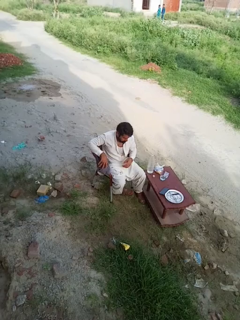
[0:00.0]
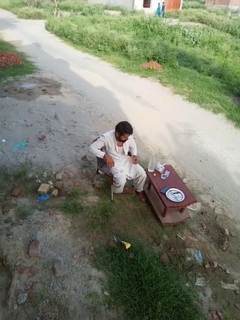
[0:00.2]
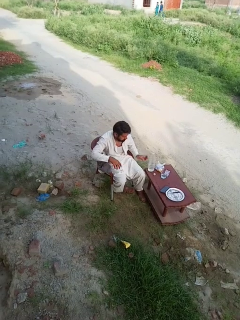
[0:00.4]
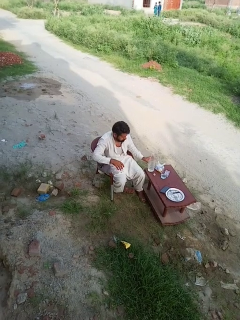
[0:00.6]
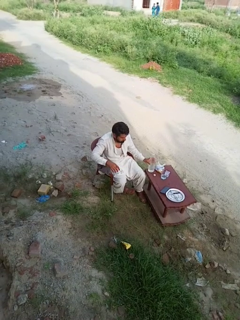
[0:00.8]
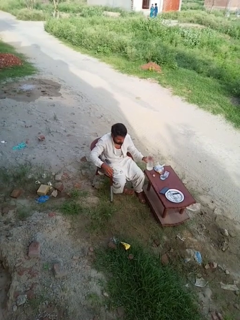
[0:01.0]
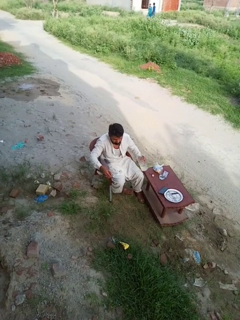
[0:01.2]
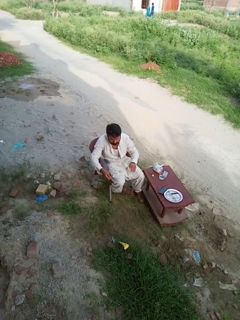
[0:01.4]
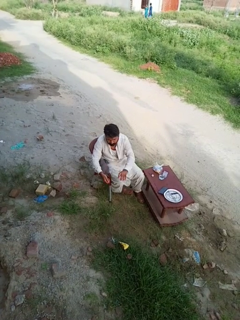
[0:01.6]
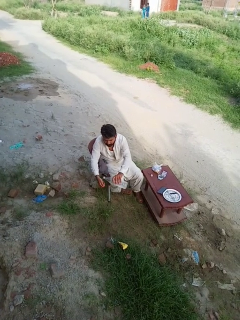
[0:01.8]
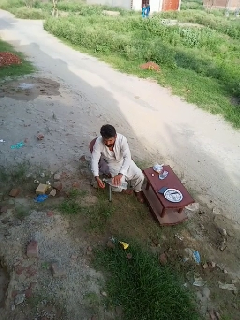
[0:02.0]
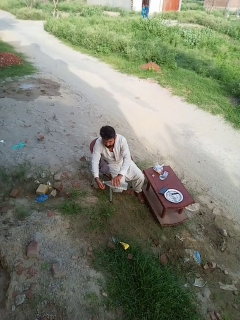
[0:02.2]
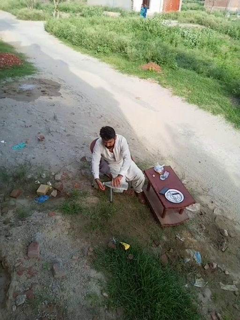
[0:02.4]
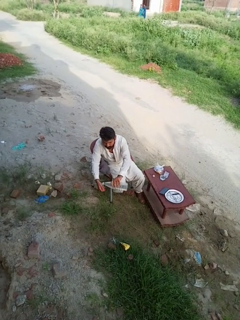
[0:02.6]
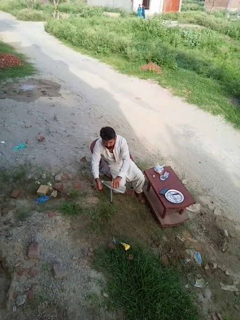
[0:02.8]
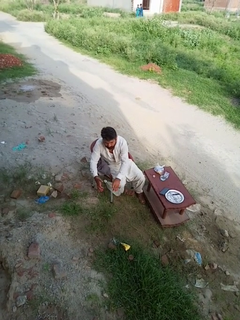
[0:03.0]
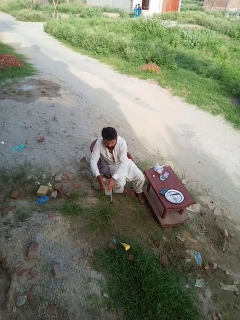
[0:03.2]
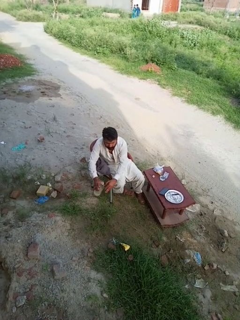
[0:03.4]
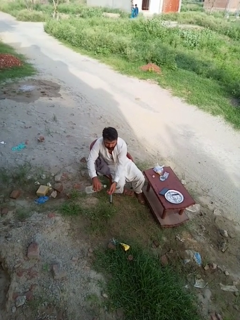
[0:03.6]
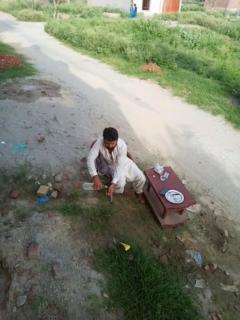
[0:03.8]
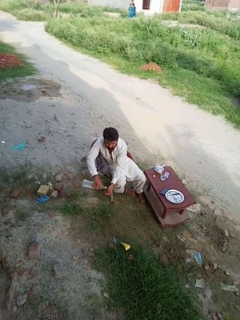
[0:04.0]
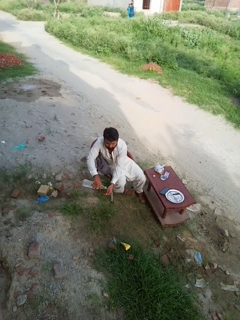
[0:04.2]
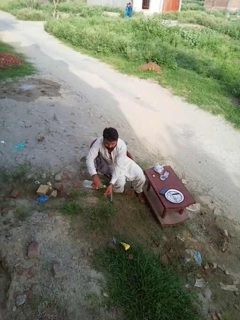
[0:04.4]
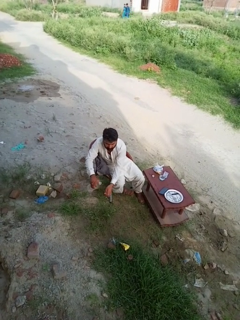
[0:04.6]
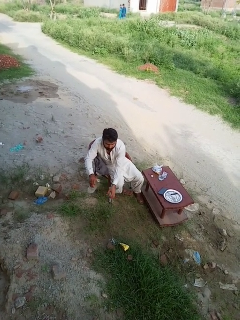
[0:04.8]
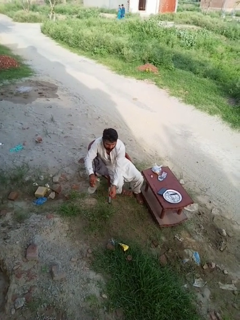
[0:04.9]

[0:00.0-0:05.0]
person washes hands

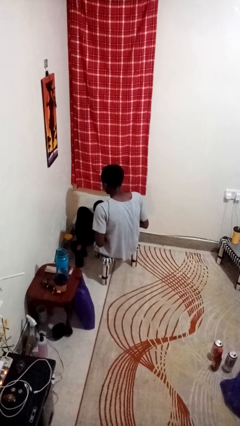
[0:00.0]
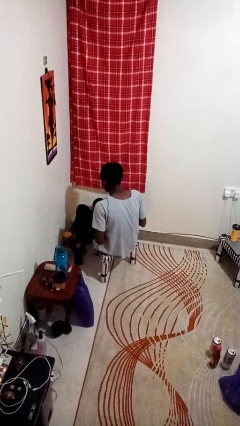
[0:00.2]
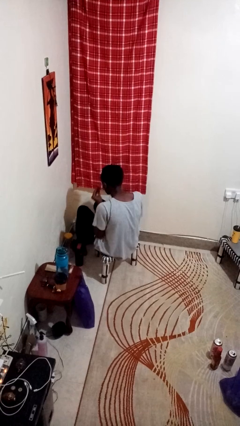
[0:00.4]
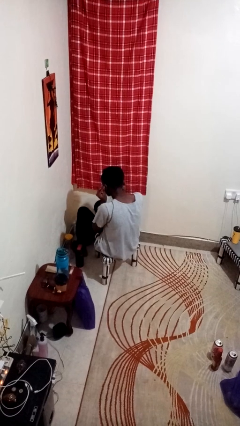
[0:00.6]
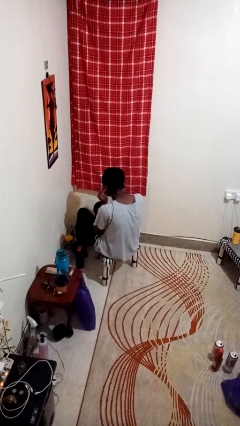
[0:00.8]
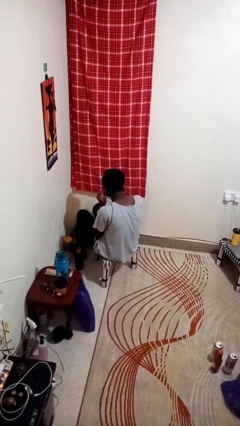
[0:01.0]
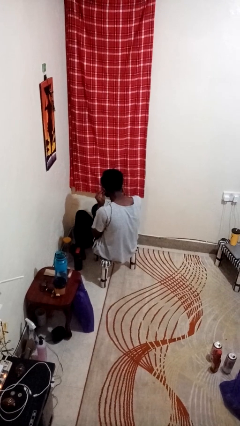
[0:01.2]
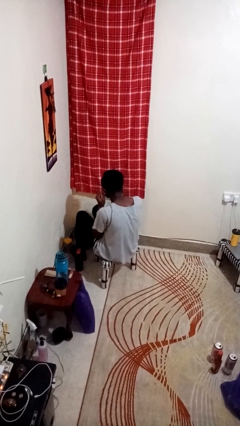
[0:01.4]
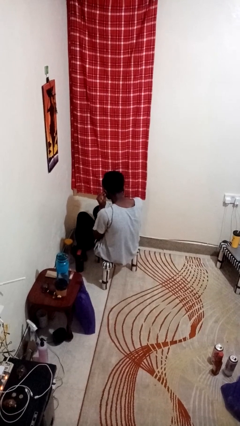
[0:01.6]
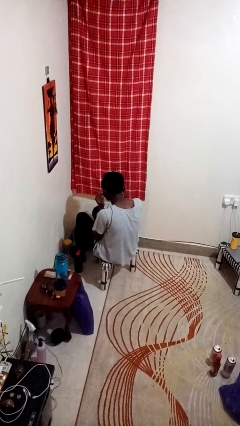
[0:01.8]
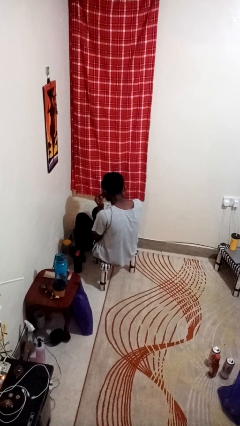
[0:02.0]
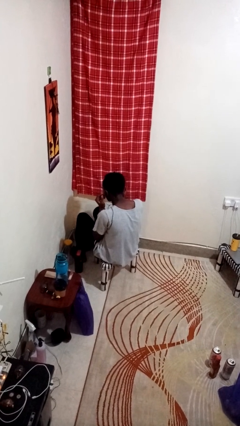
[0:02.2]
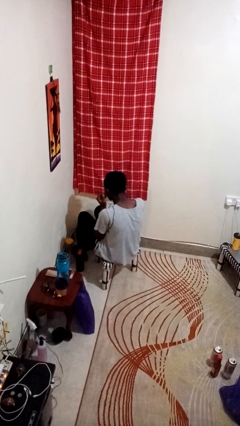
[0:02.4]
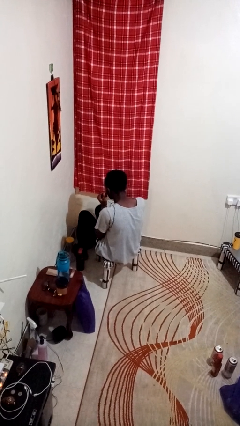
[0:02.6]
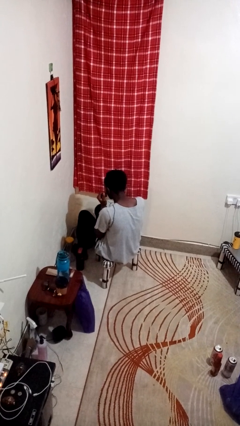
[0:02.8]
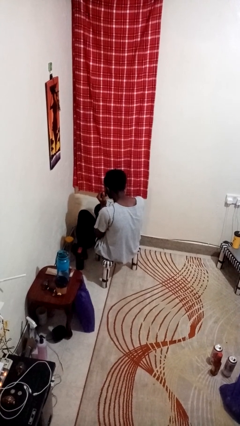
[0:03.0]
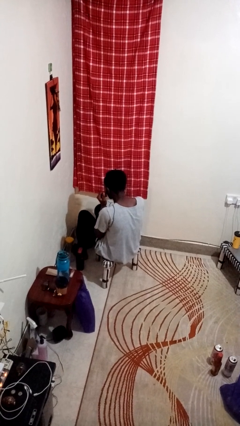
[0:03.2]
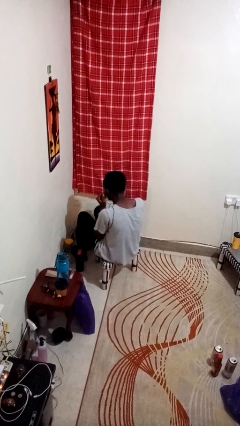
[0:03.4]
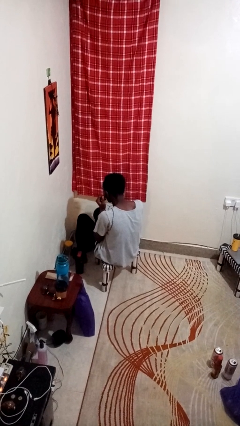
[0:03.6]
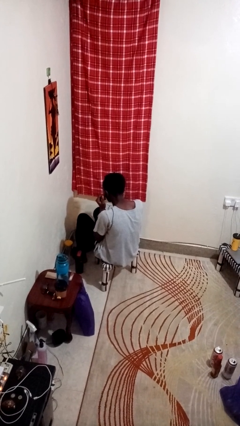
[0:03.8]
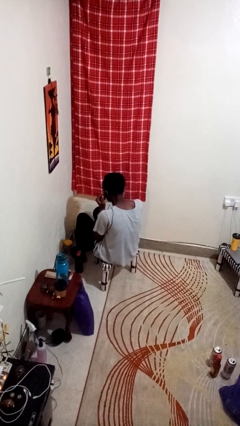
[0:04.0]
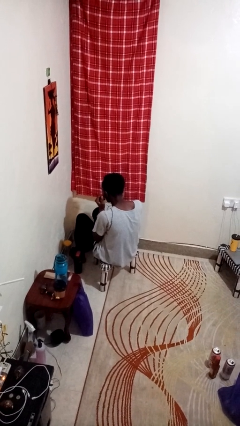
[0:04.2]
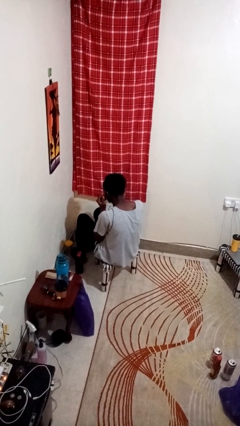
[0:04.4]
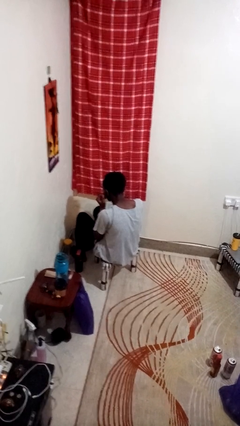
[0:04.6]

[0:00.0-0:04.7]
person puts on headphones

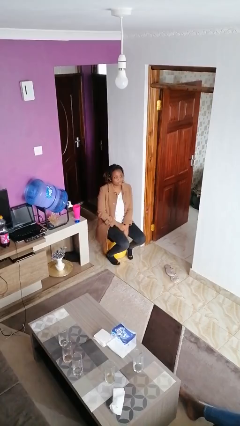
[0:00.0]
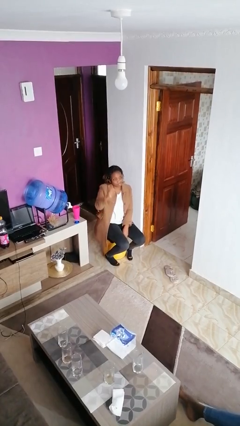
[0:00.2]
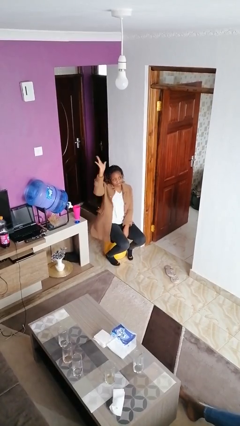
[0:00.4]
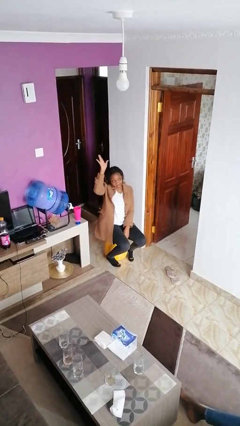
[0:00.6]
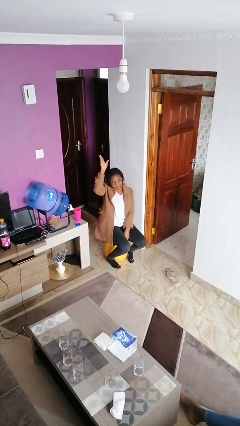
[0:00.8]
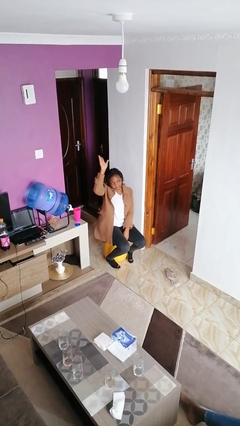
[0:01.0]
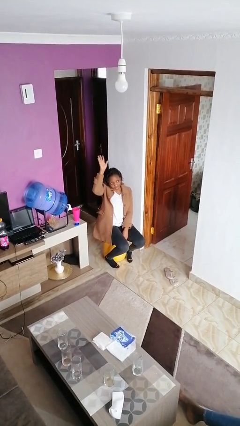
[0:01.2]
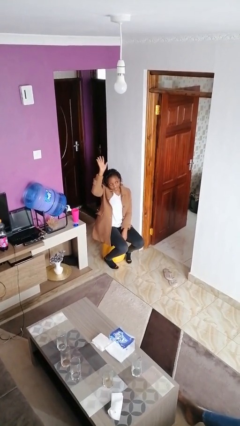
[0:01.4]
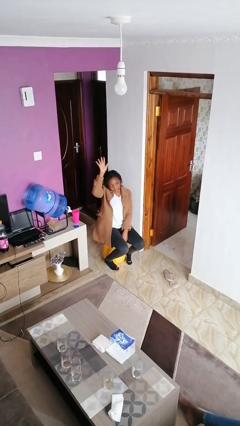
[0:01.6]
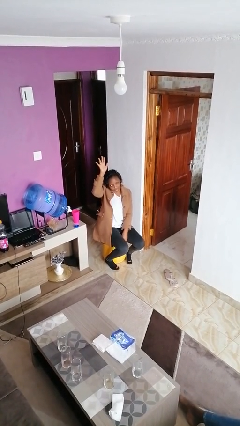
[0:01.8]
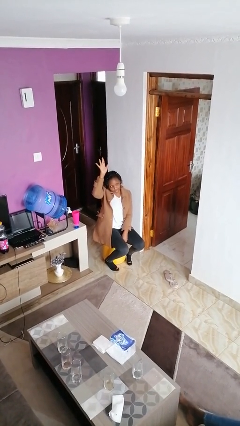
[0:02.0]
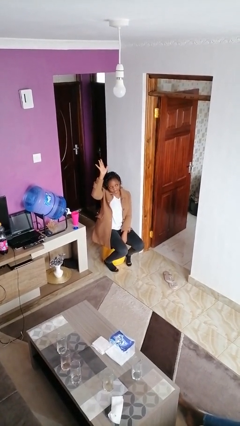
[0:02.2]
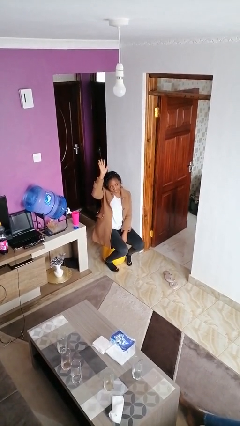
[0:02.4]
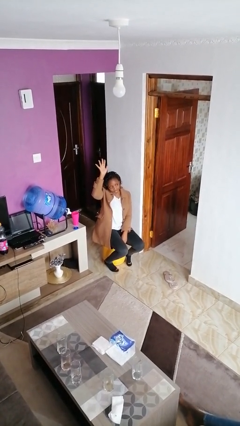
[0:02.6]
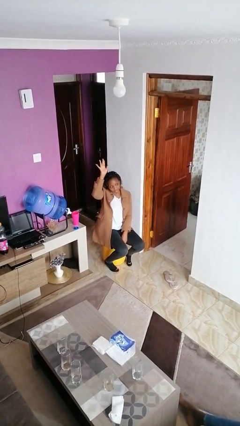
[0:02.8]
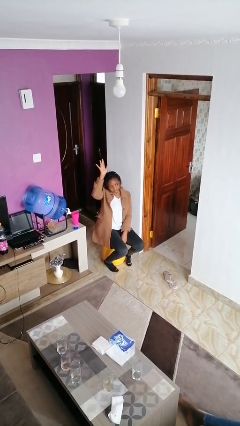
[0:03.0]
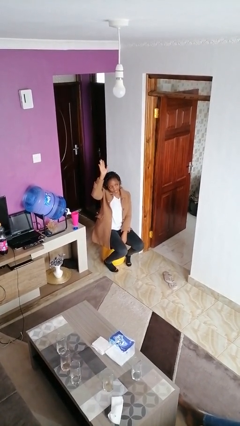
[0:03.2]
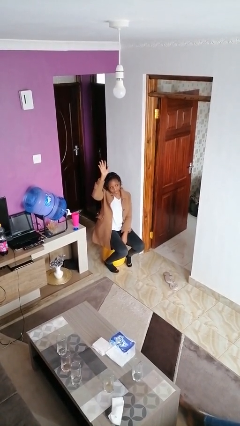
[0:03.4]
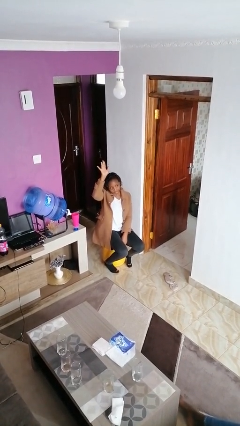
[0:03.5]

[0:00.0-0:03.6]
person gestures raise hand

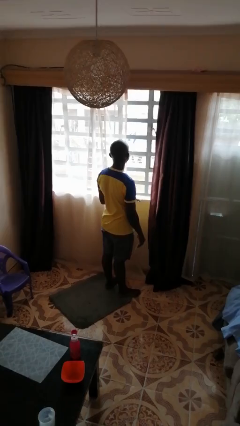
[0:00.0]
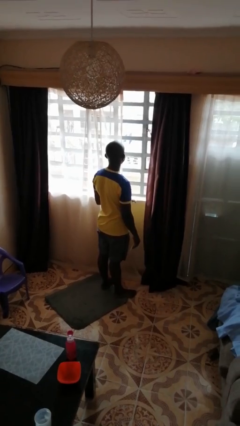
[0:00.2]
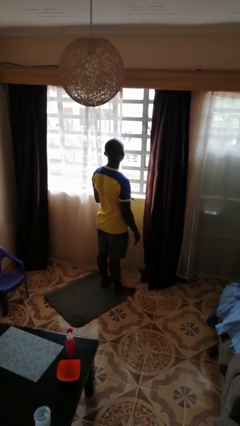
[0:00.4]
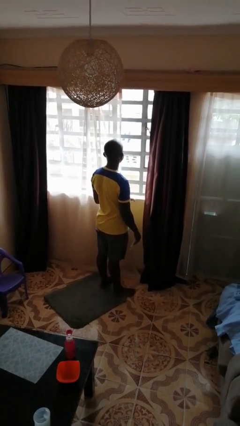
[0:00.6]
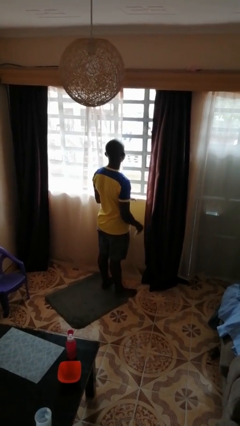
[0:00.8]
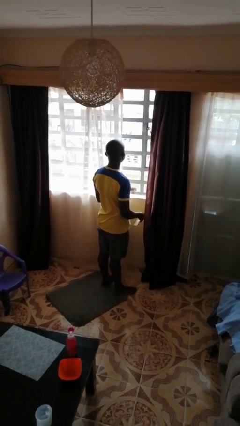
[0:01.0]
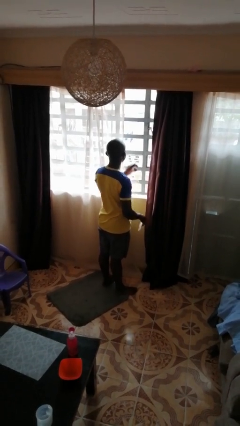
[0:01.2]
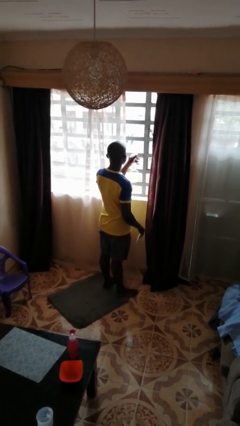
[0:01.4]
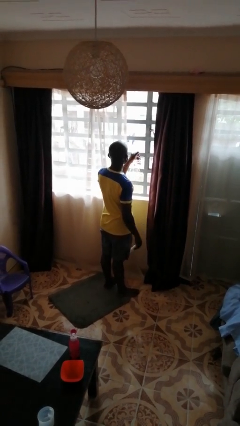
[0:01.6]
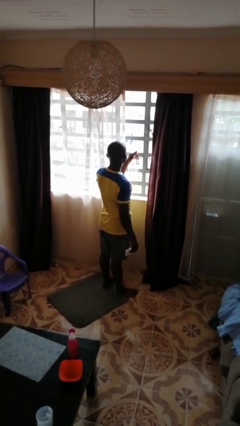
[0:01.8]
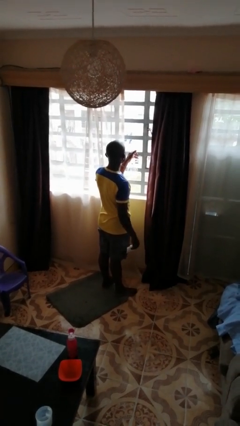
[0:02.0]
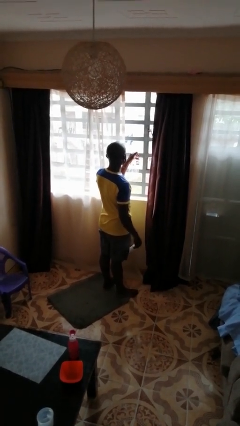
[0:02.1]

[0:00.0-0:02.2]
person sprays from bottle

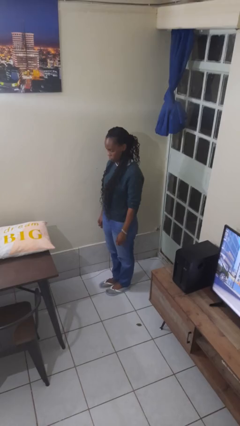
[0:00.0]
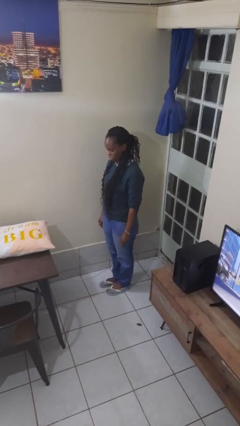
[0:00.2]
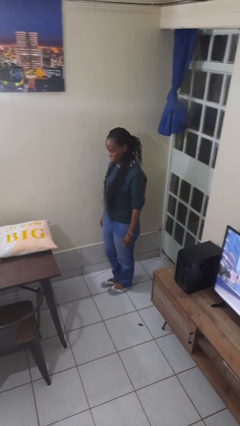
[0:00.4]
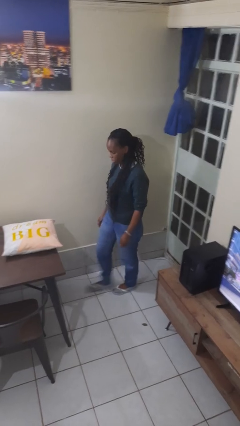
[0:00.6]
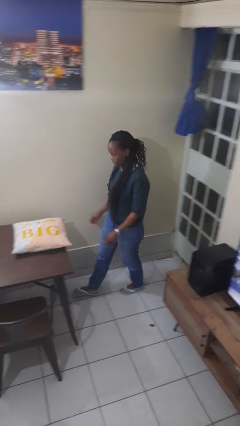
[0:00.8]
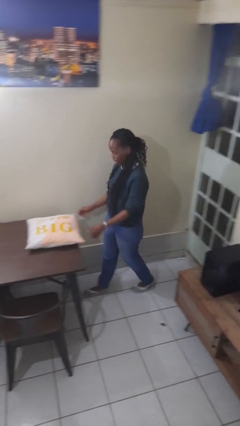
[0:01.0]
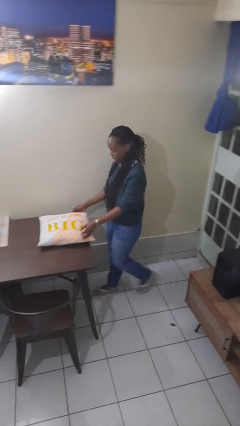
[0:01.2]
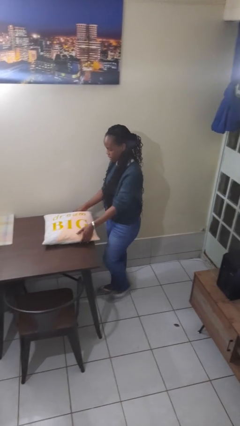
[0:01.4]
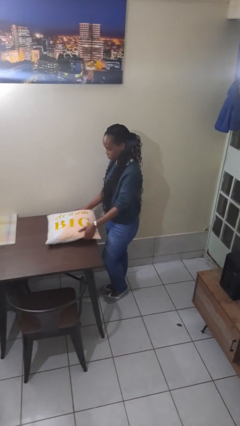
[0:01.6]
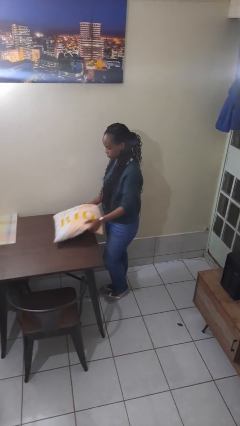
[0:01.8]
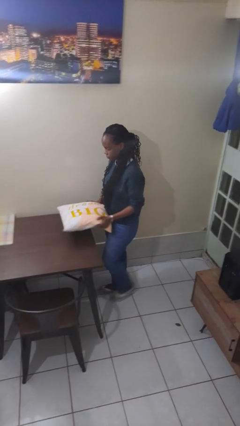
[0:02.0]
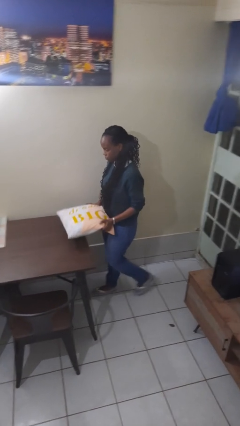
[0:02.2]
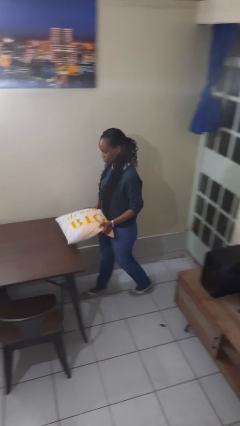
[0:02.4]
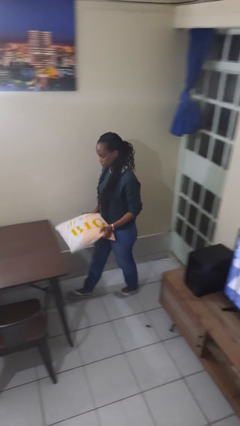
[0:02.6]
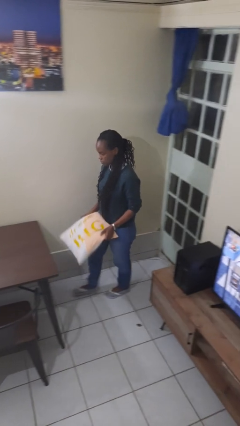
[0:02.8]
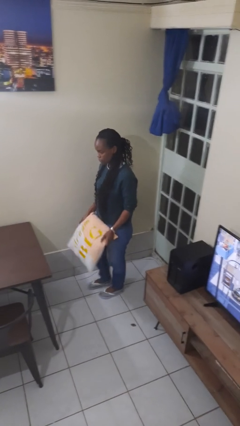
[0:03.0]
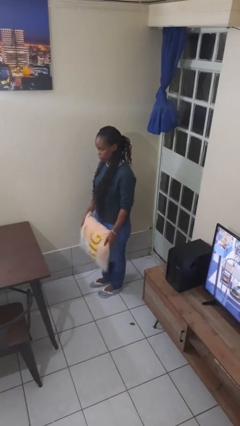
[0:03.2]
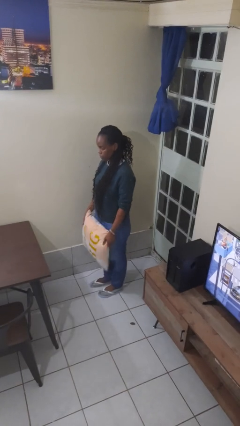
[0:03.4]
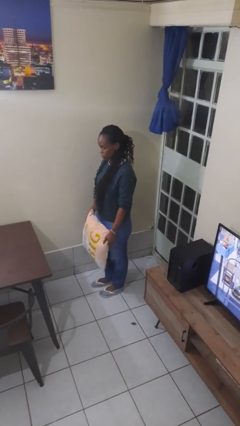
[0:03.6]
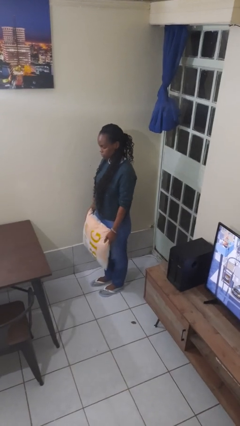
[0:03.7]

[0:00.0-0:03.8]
person picks up object from table
